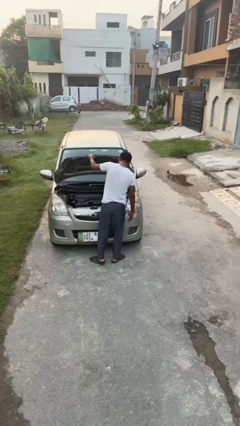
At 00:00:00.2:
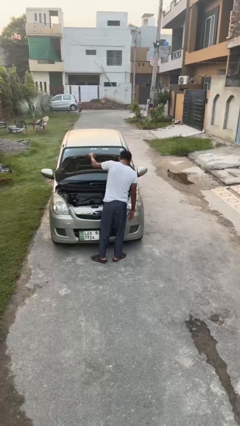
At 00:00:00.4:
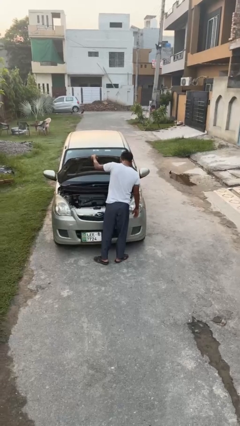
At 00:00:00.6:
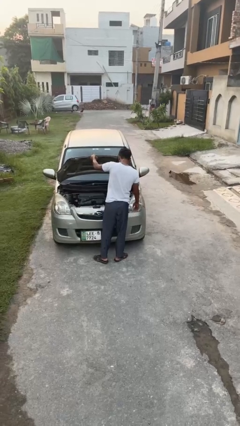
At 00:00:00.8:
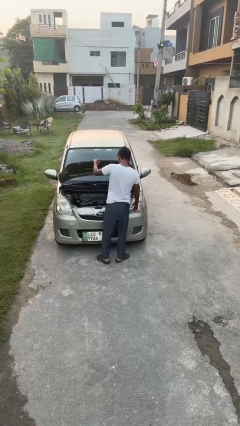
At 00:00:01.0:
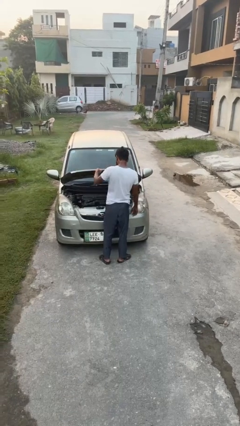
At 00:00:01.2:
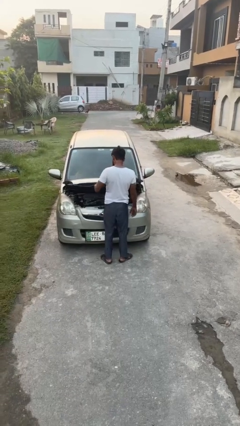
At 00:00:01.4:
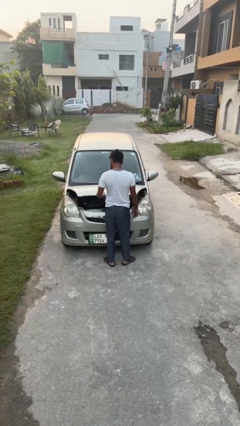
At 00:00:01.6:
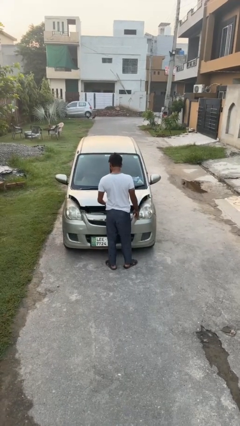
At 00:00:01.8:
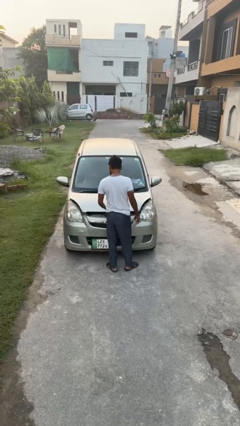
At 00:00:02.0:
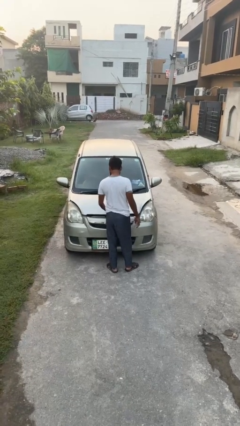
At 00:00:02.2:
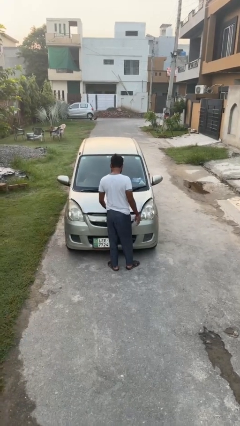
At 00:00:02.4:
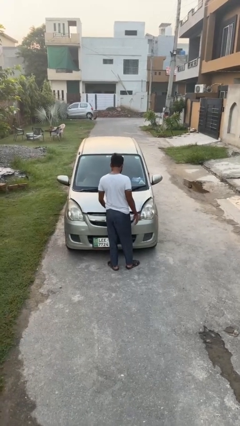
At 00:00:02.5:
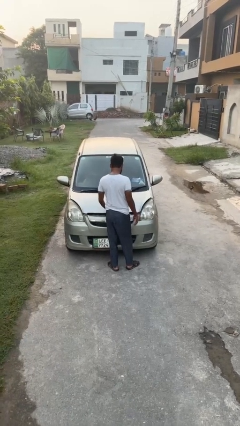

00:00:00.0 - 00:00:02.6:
person closes car hood

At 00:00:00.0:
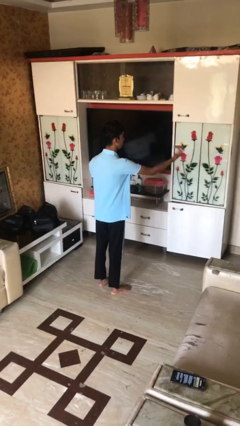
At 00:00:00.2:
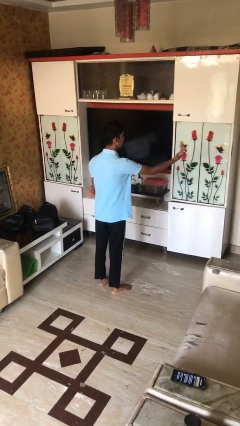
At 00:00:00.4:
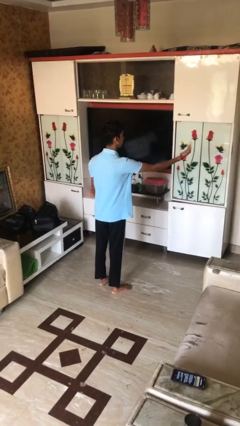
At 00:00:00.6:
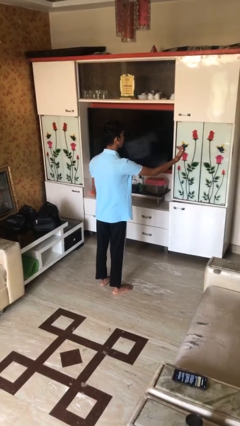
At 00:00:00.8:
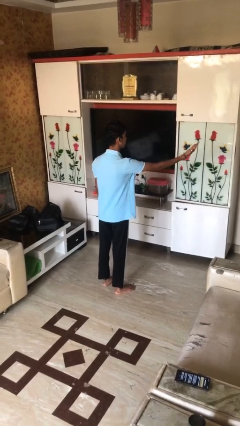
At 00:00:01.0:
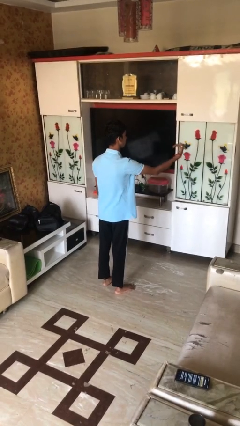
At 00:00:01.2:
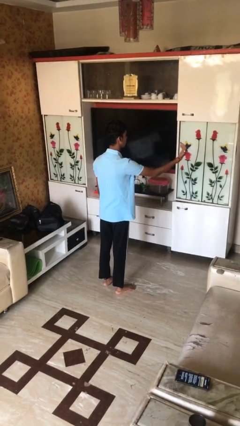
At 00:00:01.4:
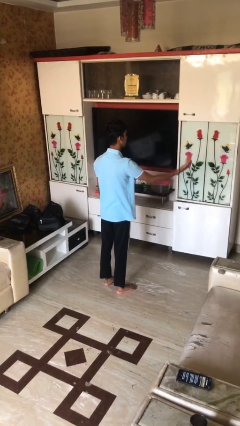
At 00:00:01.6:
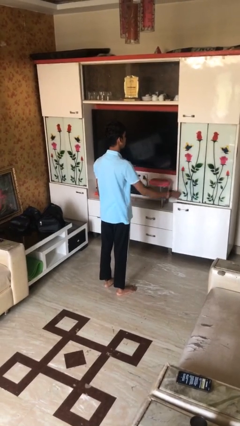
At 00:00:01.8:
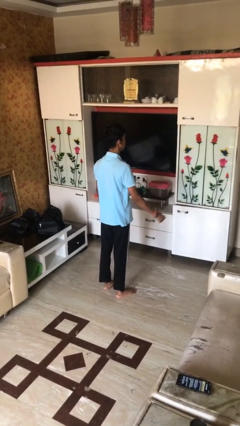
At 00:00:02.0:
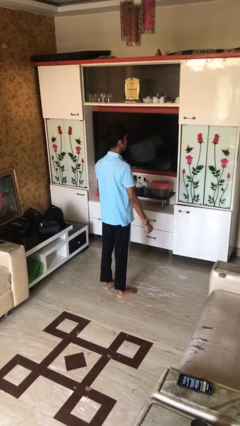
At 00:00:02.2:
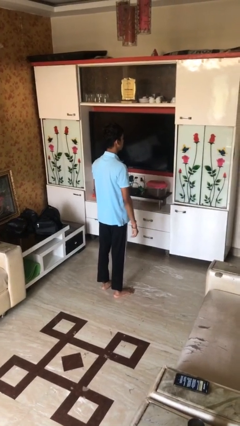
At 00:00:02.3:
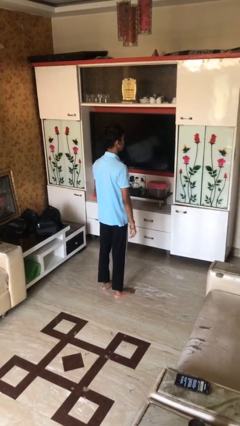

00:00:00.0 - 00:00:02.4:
person gestures come here

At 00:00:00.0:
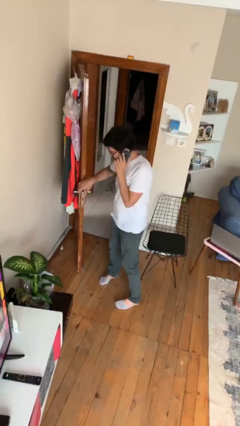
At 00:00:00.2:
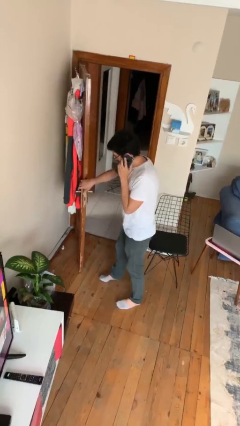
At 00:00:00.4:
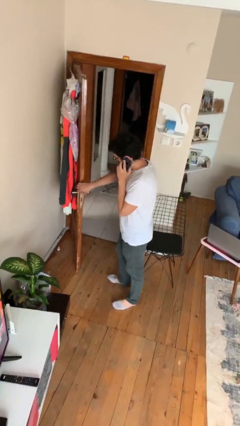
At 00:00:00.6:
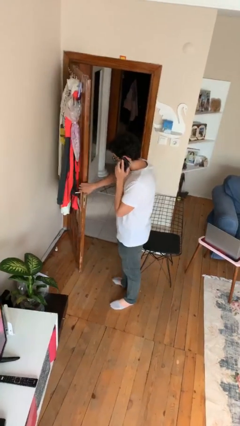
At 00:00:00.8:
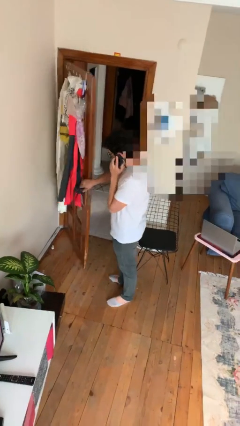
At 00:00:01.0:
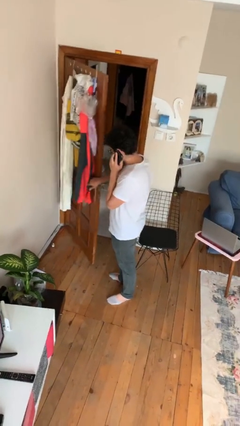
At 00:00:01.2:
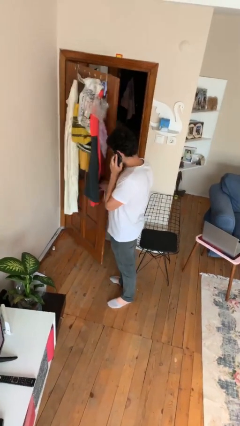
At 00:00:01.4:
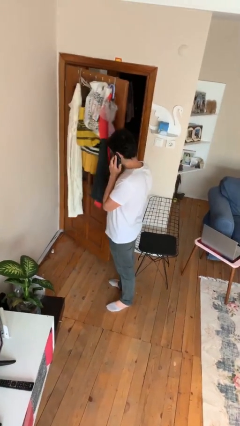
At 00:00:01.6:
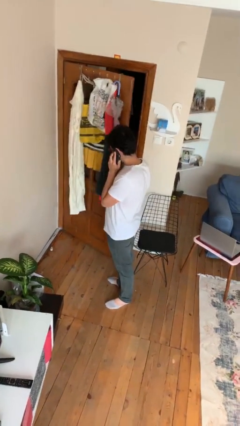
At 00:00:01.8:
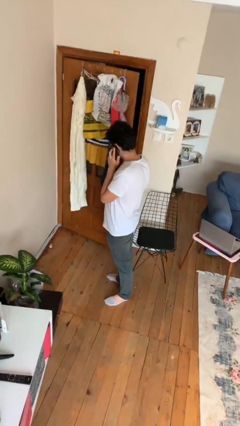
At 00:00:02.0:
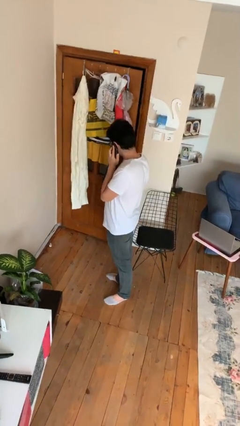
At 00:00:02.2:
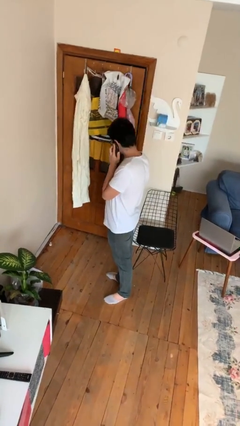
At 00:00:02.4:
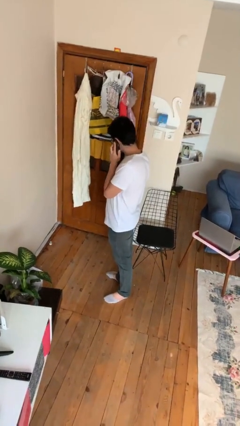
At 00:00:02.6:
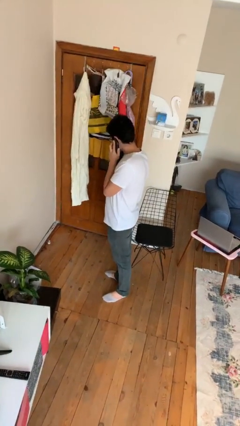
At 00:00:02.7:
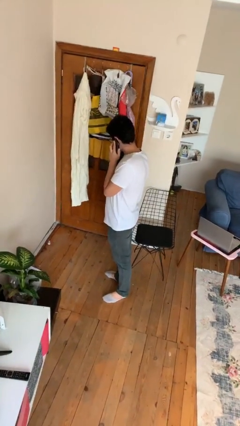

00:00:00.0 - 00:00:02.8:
person closes facility door

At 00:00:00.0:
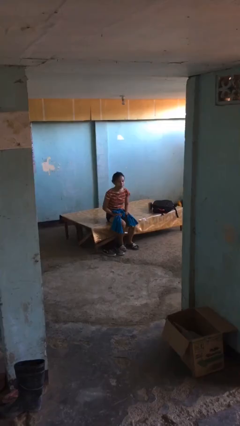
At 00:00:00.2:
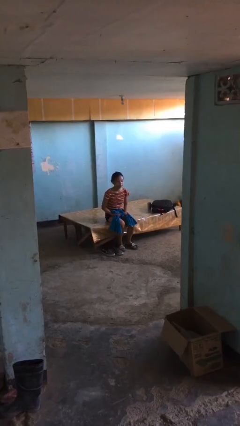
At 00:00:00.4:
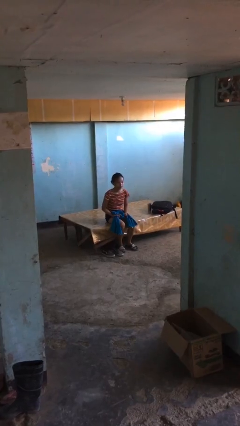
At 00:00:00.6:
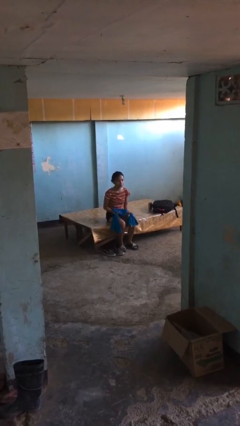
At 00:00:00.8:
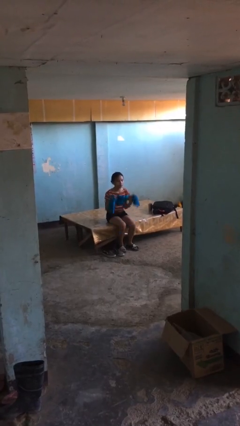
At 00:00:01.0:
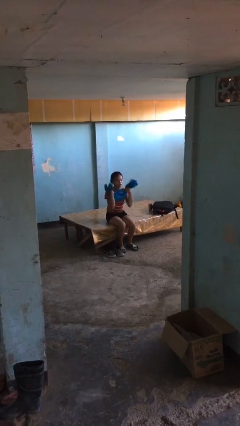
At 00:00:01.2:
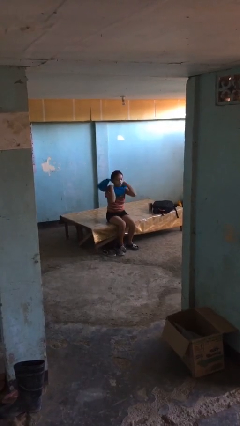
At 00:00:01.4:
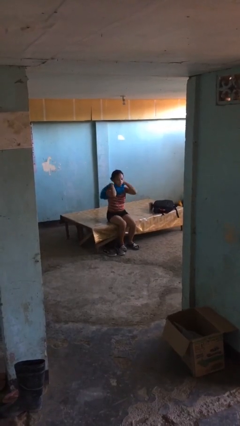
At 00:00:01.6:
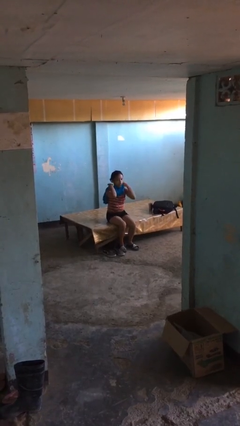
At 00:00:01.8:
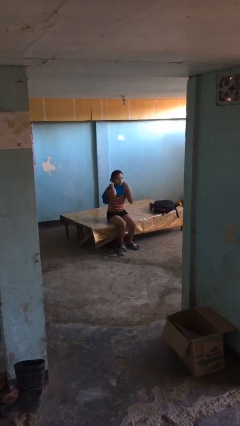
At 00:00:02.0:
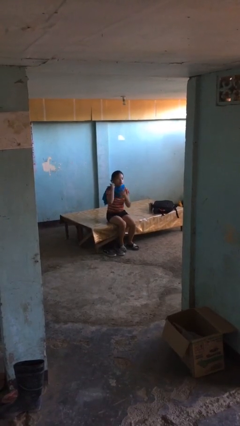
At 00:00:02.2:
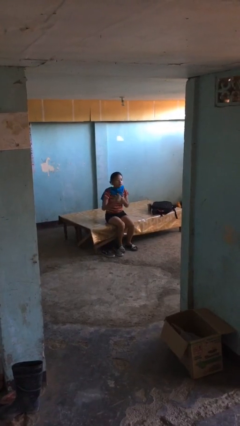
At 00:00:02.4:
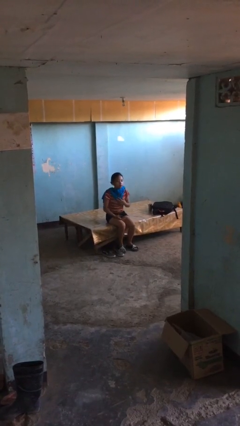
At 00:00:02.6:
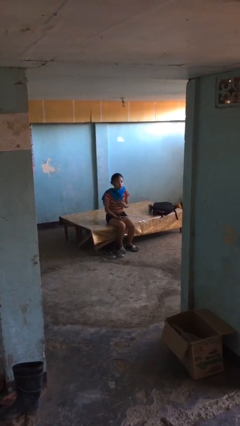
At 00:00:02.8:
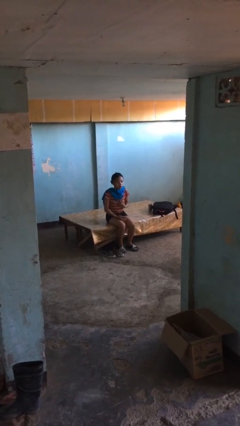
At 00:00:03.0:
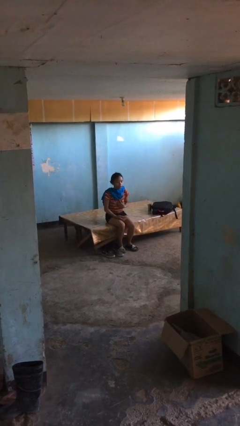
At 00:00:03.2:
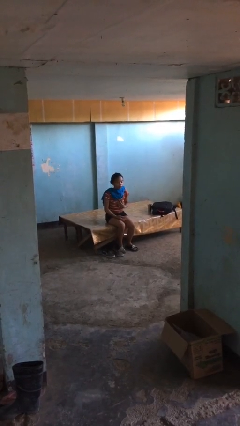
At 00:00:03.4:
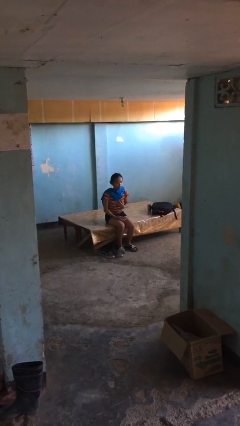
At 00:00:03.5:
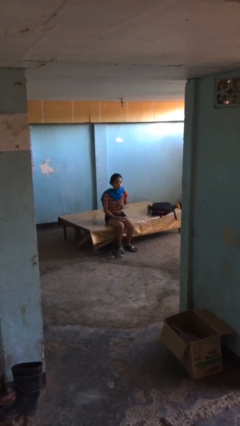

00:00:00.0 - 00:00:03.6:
person puts on scarf

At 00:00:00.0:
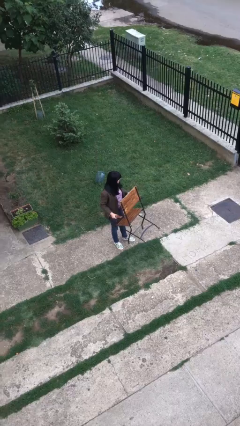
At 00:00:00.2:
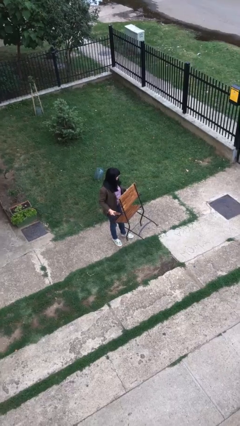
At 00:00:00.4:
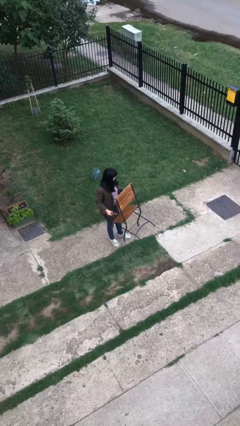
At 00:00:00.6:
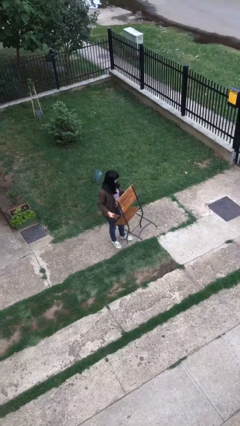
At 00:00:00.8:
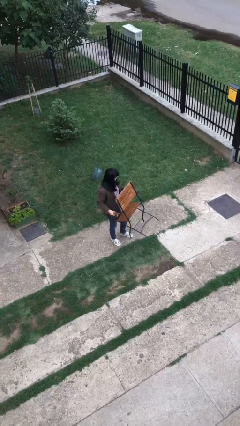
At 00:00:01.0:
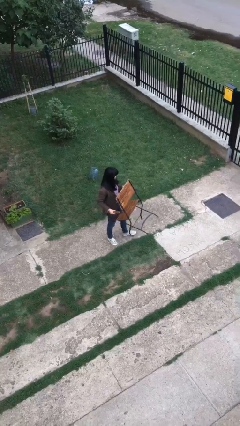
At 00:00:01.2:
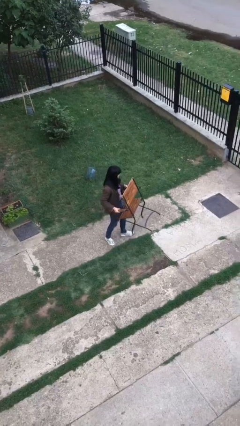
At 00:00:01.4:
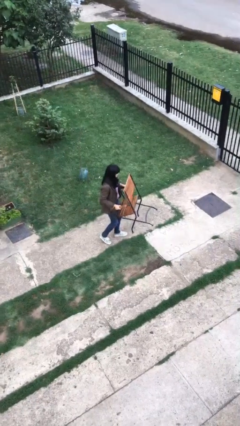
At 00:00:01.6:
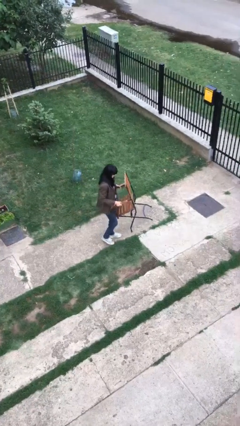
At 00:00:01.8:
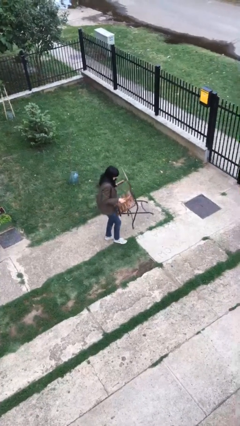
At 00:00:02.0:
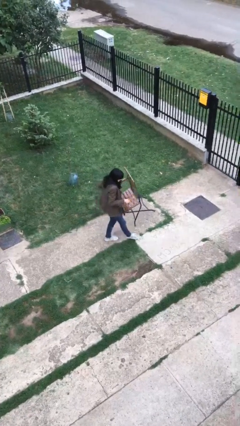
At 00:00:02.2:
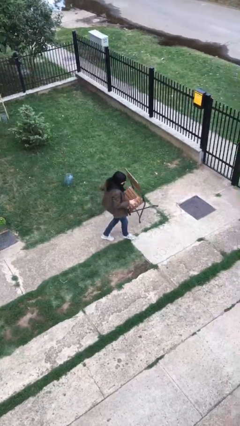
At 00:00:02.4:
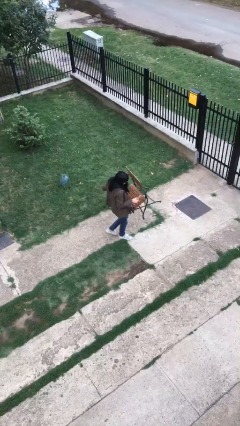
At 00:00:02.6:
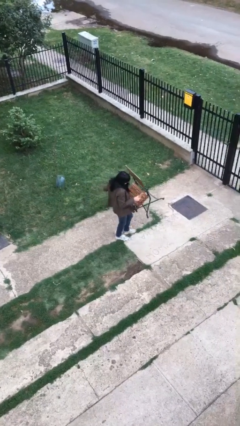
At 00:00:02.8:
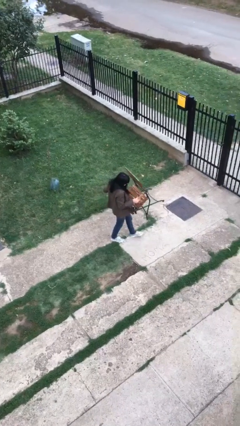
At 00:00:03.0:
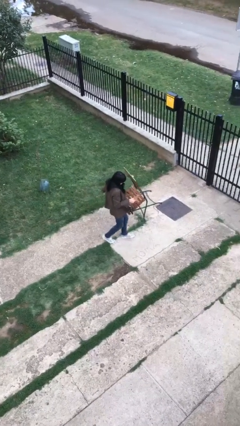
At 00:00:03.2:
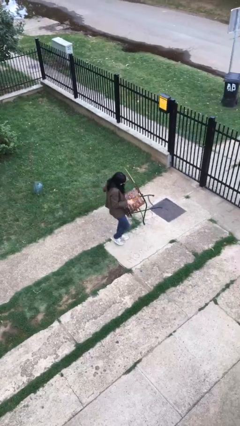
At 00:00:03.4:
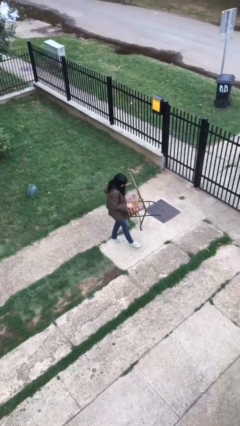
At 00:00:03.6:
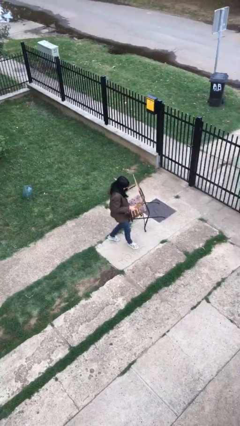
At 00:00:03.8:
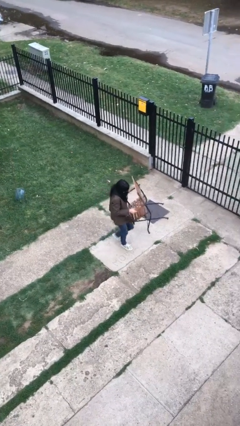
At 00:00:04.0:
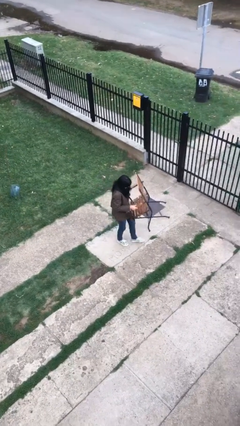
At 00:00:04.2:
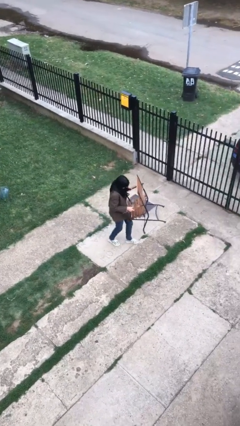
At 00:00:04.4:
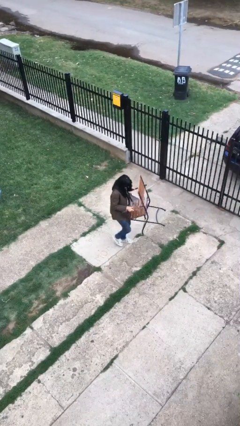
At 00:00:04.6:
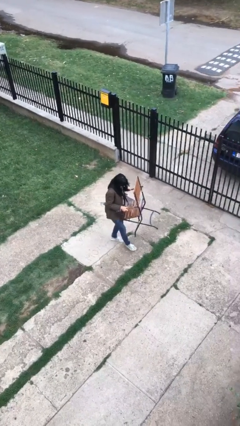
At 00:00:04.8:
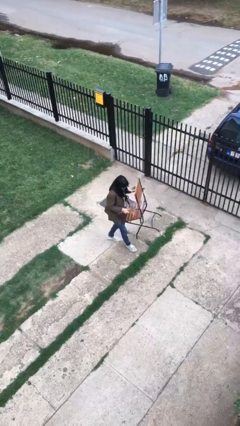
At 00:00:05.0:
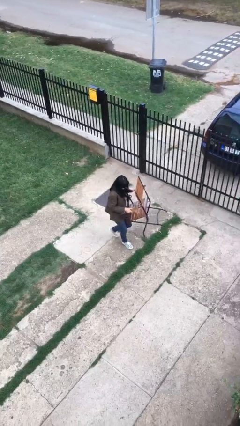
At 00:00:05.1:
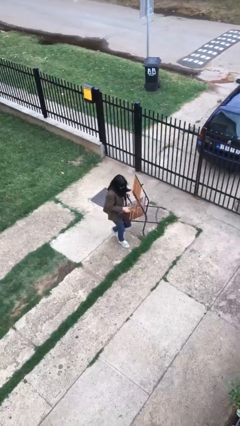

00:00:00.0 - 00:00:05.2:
person carries heavy object

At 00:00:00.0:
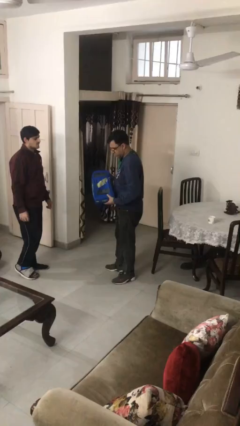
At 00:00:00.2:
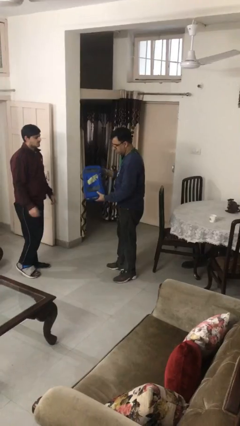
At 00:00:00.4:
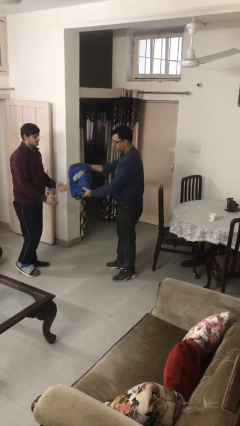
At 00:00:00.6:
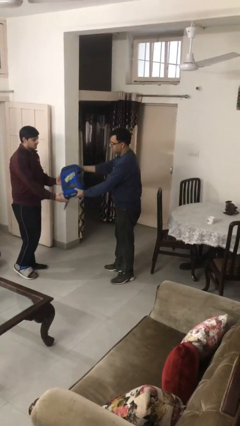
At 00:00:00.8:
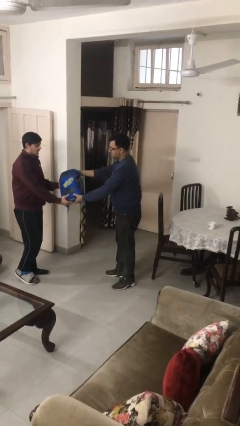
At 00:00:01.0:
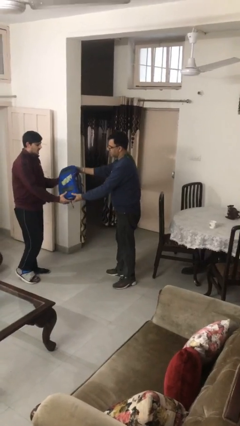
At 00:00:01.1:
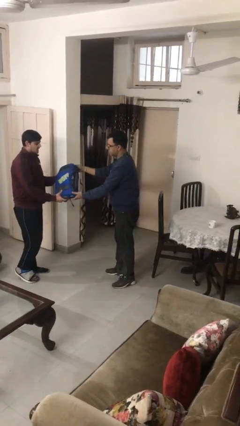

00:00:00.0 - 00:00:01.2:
person transfers object to person
